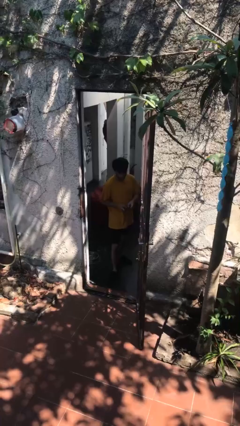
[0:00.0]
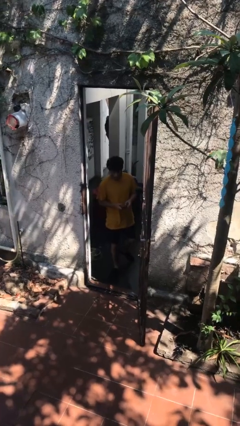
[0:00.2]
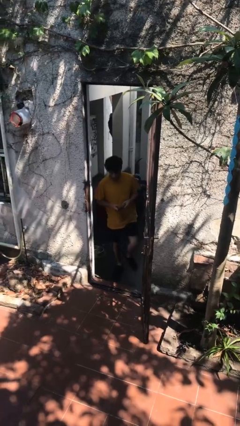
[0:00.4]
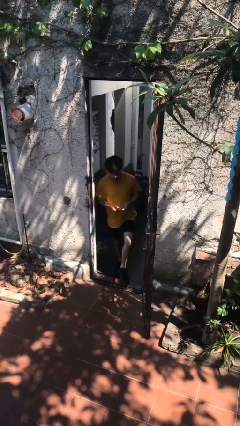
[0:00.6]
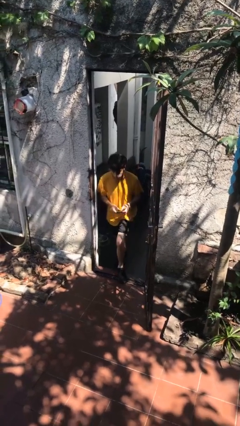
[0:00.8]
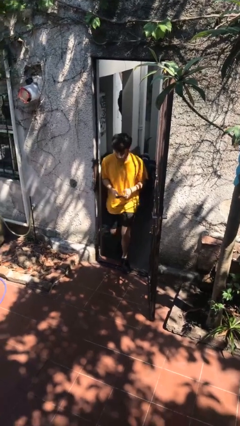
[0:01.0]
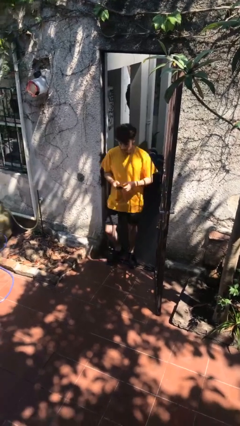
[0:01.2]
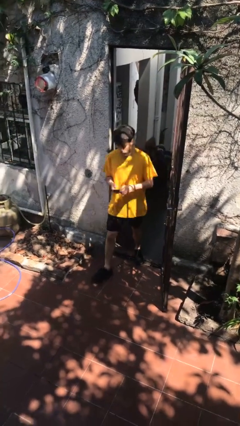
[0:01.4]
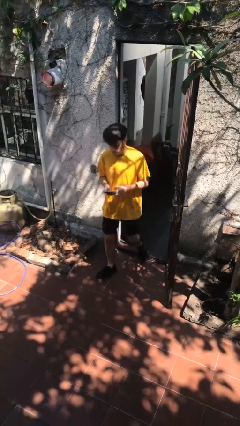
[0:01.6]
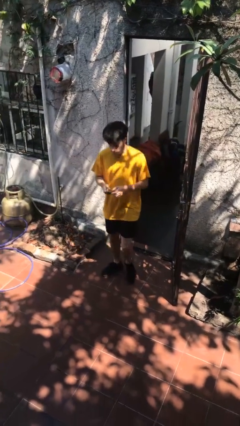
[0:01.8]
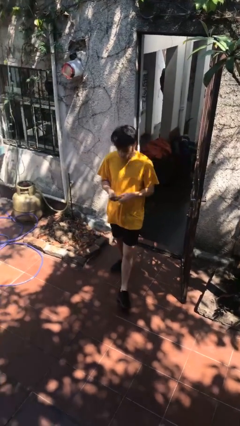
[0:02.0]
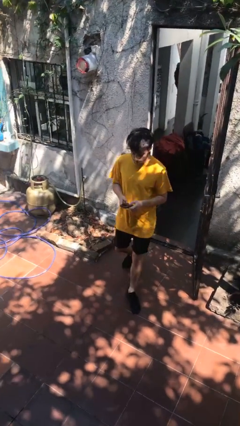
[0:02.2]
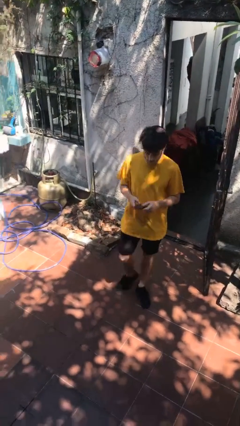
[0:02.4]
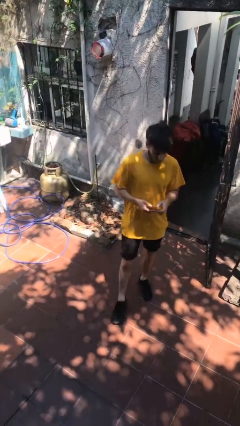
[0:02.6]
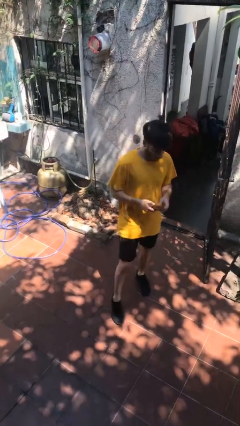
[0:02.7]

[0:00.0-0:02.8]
person enters scene through structure

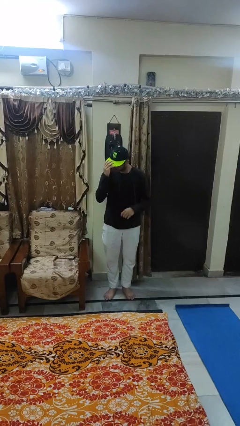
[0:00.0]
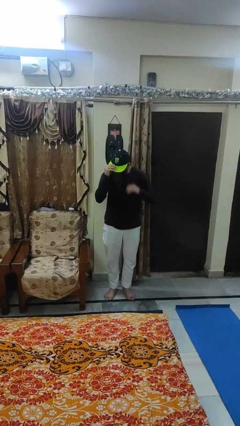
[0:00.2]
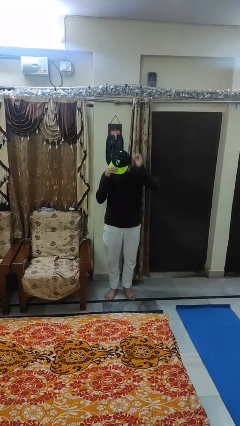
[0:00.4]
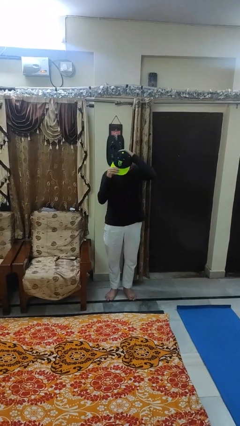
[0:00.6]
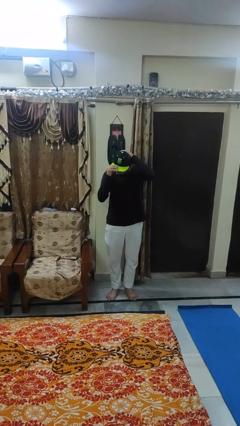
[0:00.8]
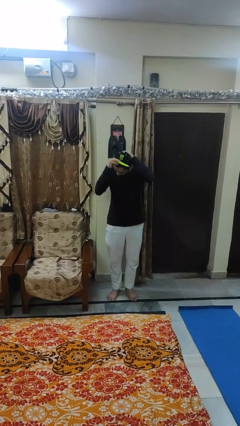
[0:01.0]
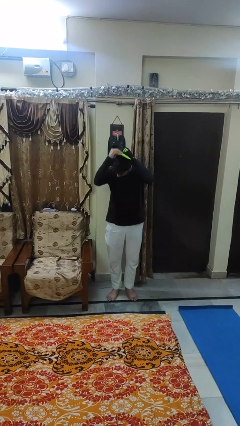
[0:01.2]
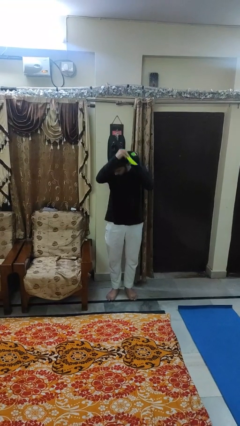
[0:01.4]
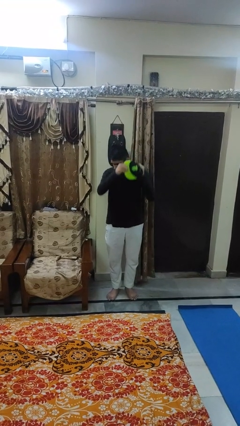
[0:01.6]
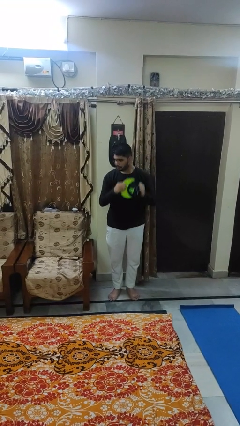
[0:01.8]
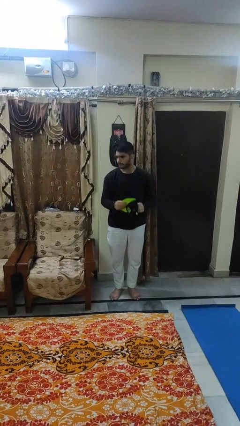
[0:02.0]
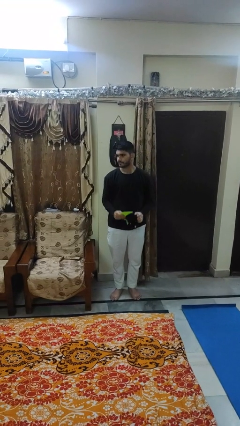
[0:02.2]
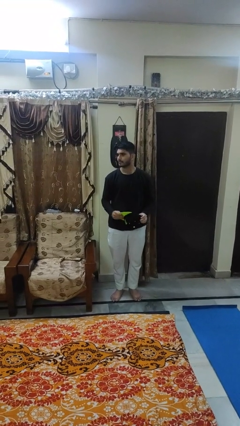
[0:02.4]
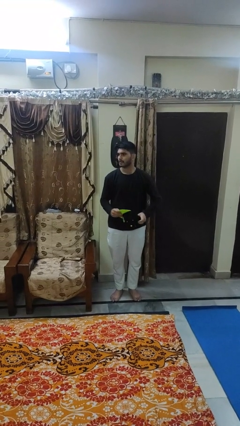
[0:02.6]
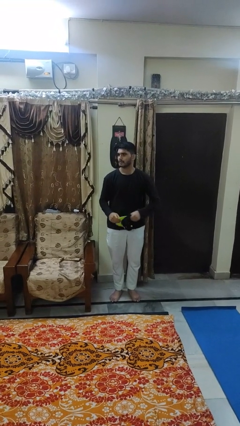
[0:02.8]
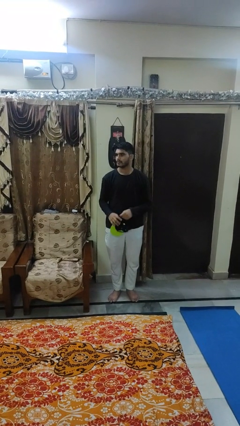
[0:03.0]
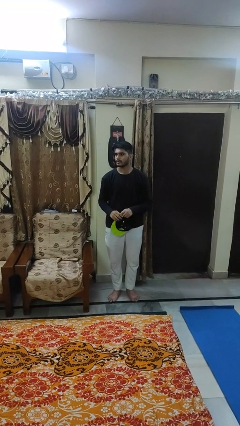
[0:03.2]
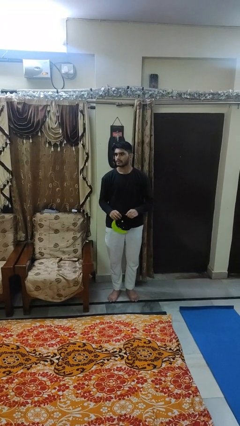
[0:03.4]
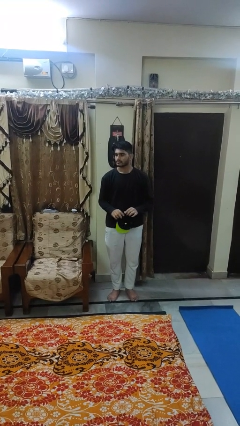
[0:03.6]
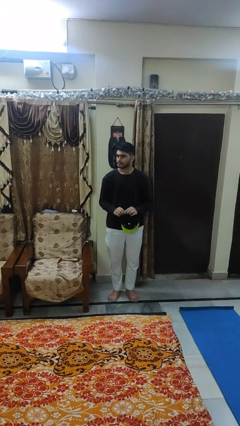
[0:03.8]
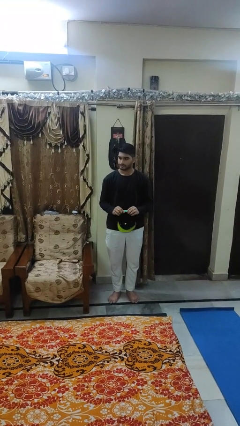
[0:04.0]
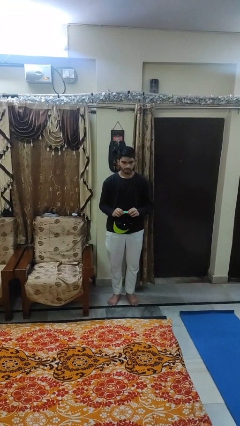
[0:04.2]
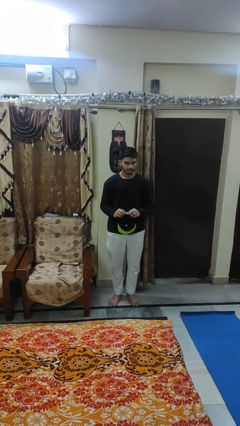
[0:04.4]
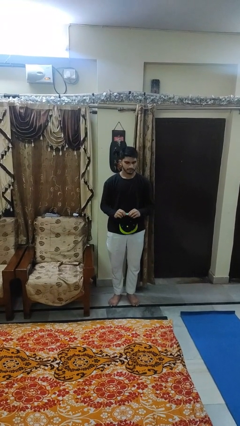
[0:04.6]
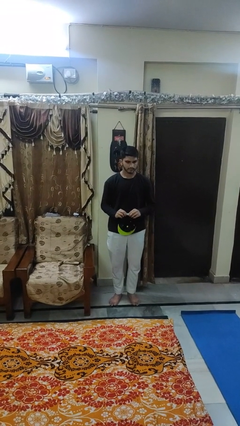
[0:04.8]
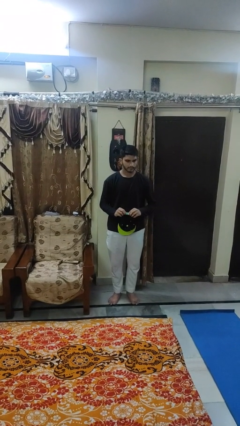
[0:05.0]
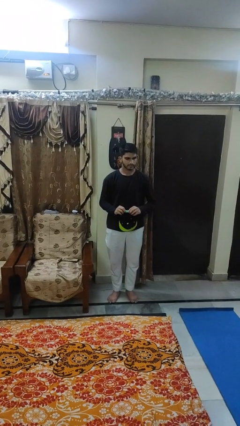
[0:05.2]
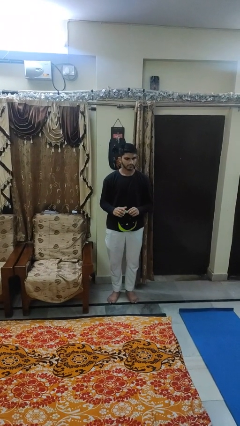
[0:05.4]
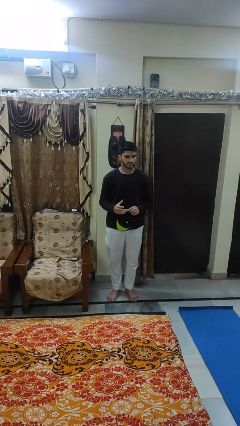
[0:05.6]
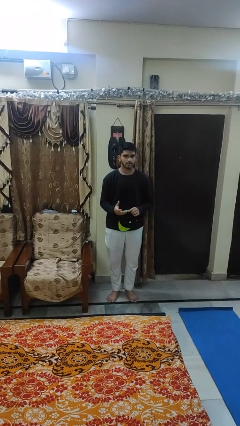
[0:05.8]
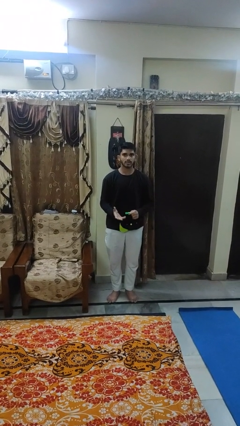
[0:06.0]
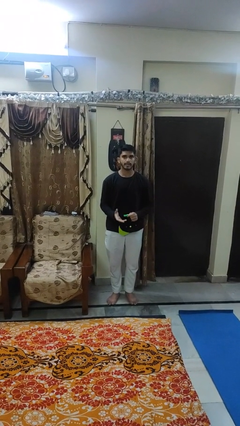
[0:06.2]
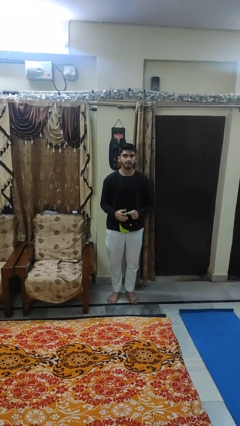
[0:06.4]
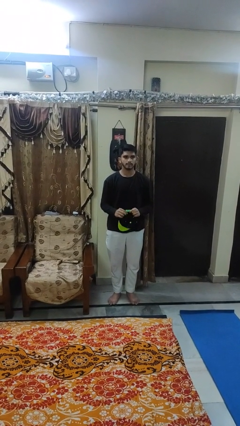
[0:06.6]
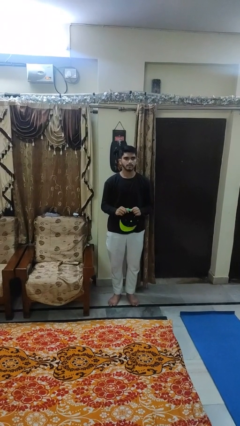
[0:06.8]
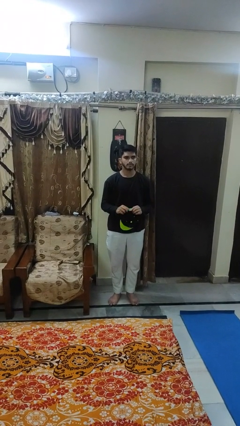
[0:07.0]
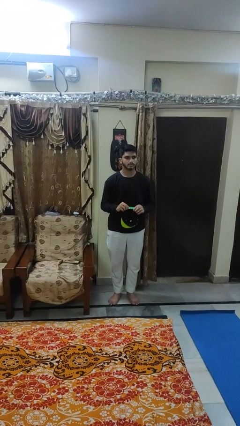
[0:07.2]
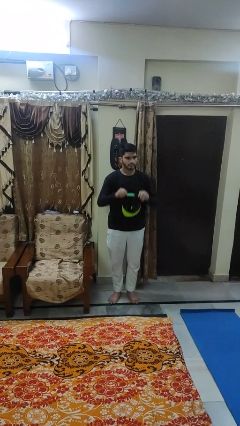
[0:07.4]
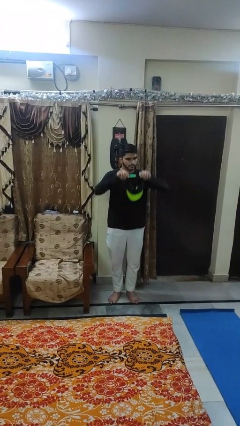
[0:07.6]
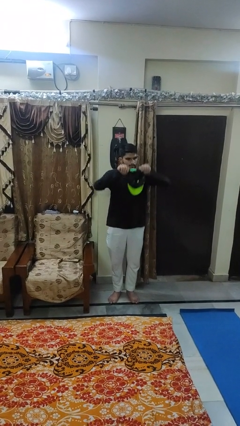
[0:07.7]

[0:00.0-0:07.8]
person takes off hat

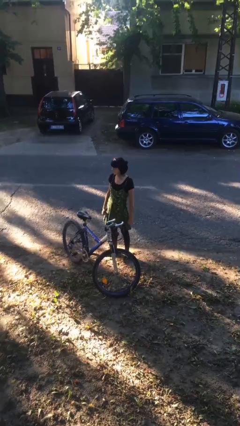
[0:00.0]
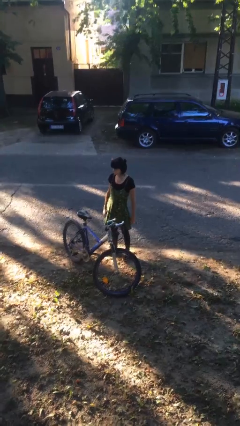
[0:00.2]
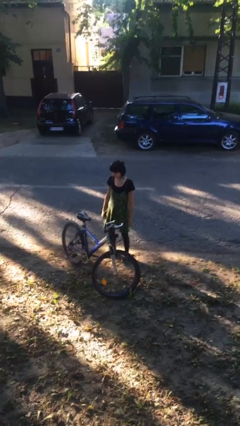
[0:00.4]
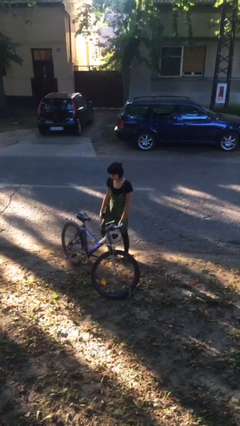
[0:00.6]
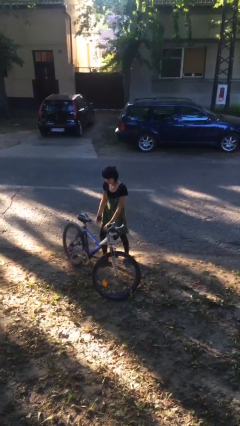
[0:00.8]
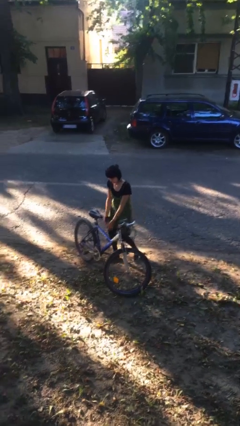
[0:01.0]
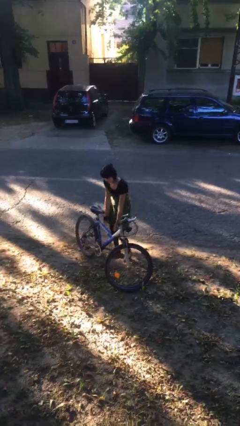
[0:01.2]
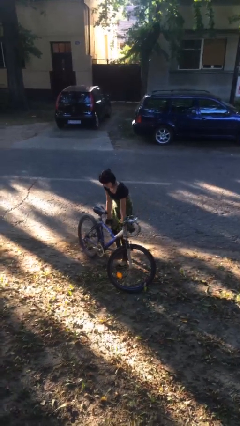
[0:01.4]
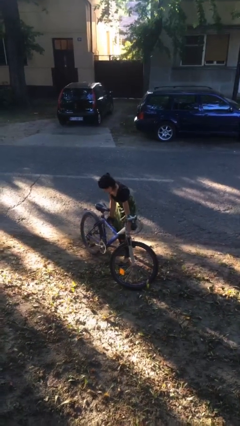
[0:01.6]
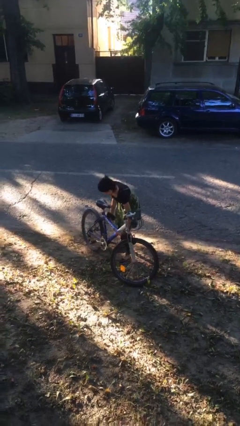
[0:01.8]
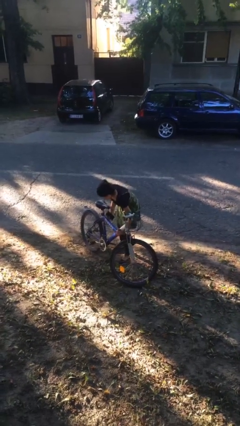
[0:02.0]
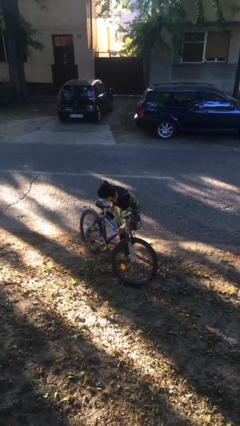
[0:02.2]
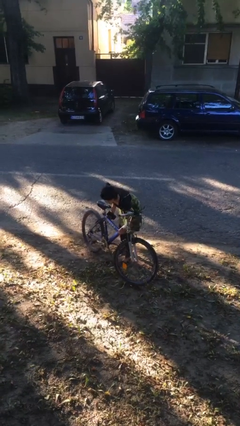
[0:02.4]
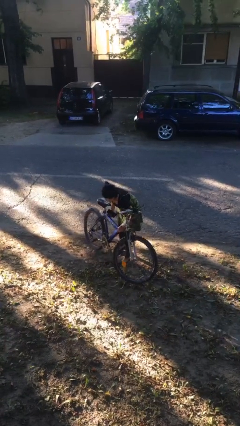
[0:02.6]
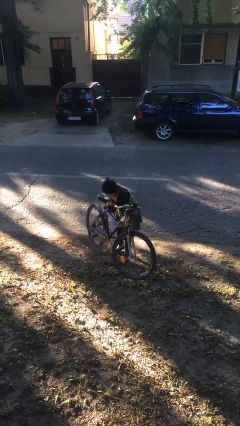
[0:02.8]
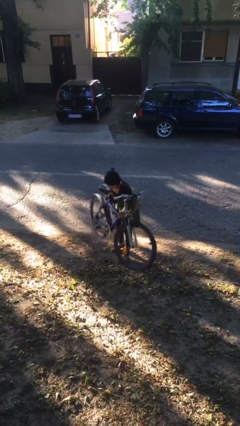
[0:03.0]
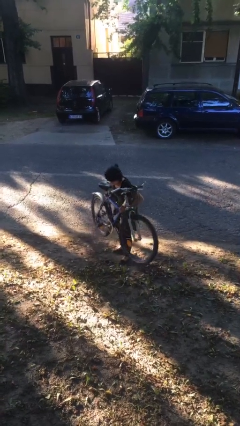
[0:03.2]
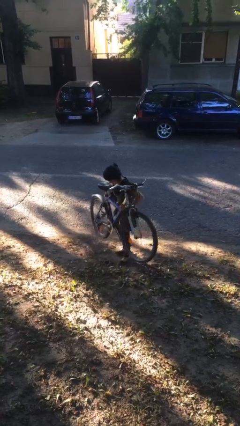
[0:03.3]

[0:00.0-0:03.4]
person picks up object from floor

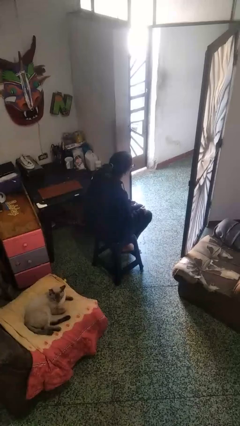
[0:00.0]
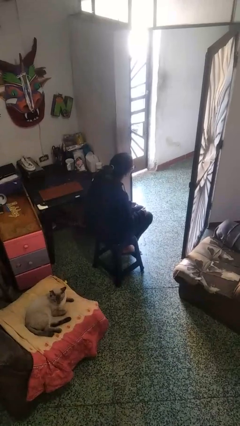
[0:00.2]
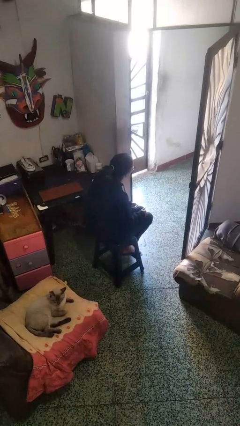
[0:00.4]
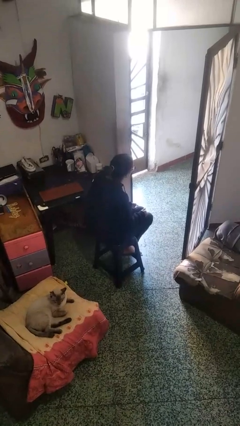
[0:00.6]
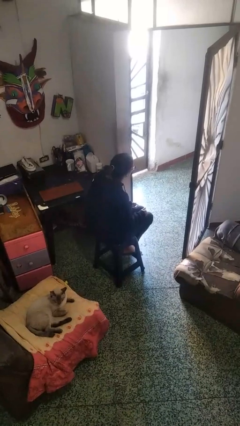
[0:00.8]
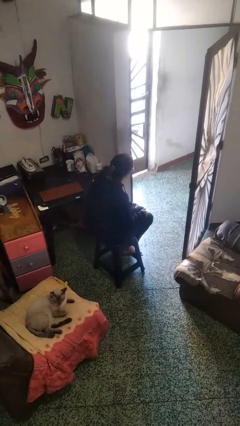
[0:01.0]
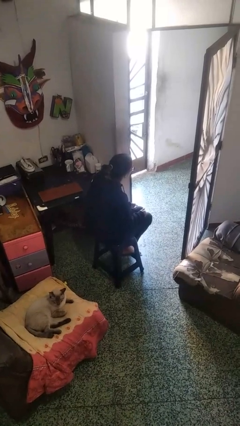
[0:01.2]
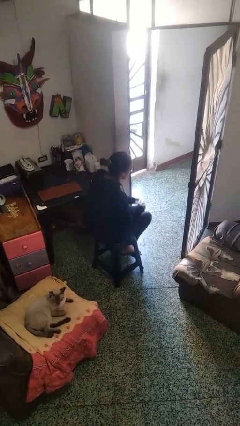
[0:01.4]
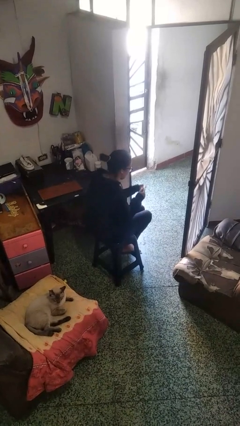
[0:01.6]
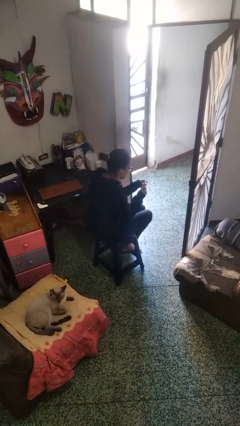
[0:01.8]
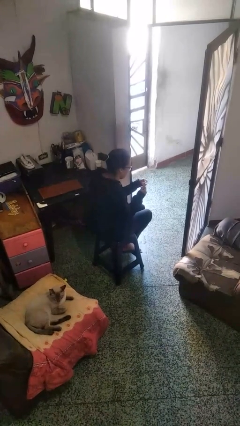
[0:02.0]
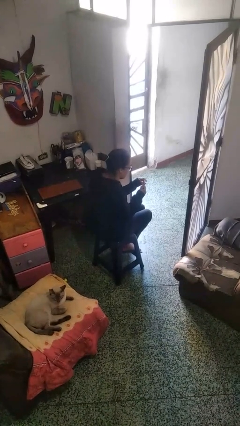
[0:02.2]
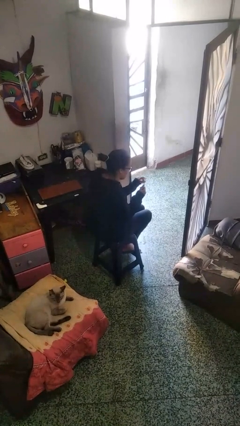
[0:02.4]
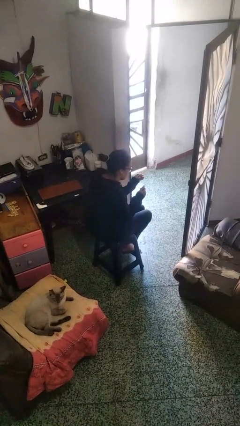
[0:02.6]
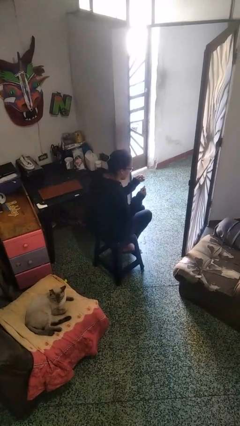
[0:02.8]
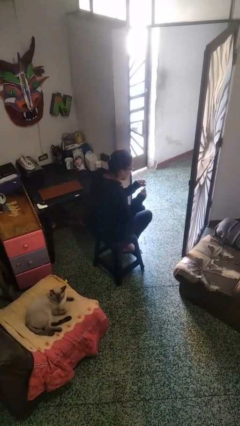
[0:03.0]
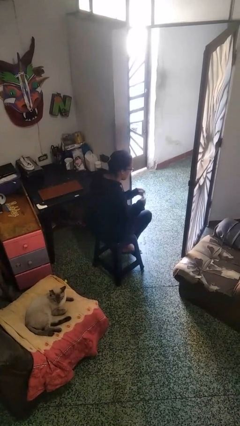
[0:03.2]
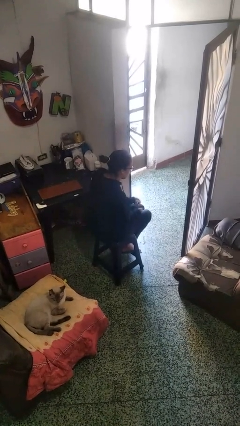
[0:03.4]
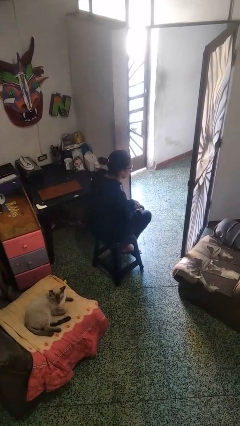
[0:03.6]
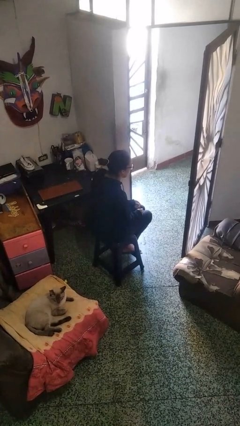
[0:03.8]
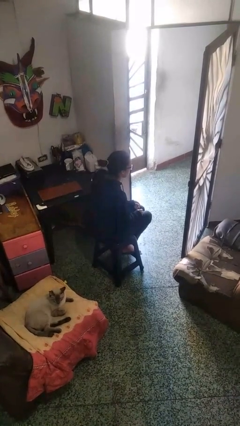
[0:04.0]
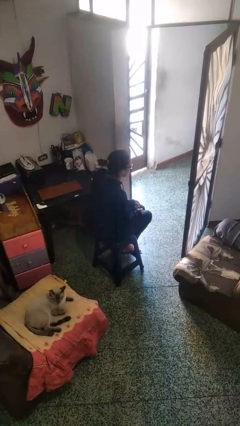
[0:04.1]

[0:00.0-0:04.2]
person clips fingernails
